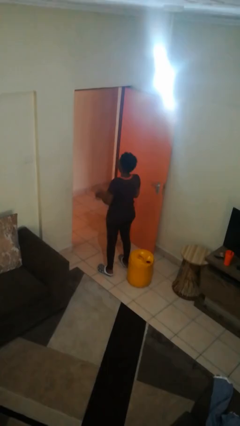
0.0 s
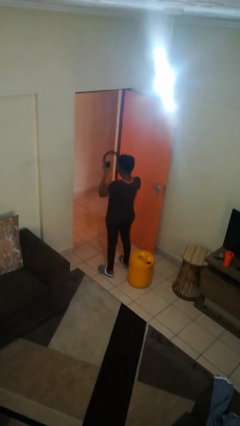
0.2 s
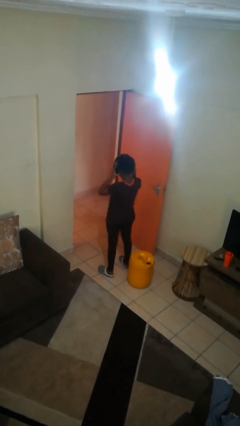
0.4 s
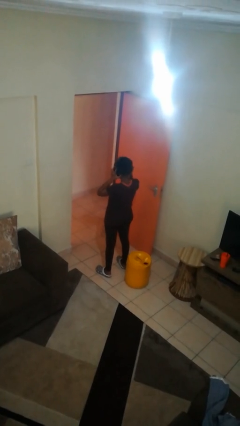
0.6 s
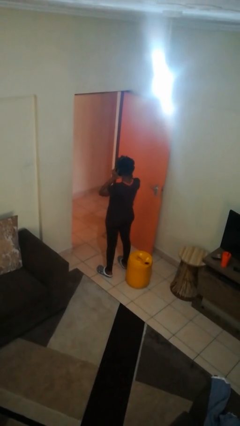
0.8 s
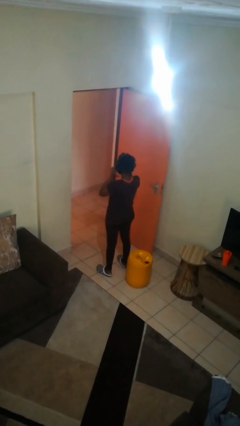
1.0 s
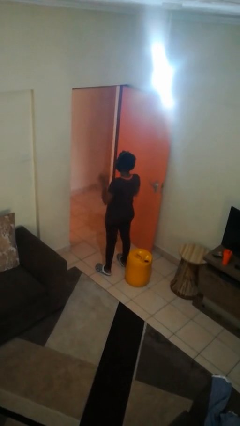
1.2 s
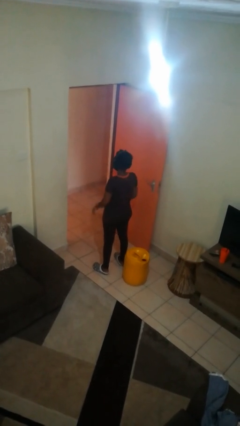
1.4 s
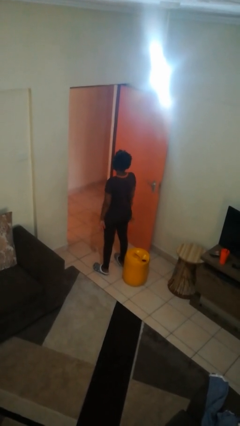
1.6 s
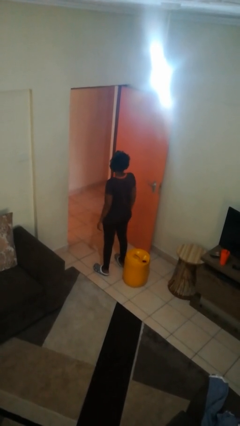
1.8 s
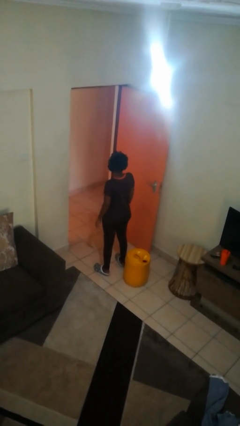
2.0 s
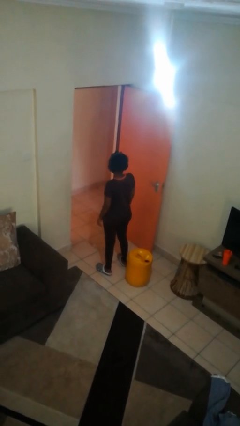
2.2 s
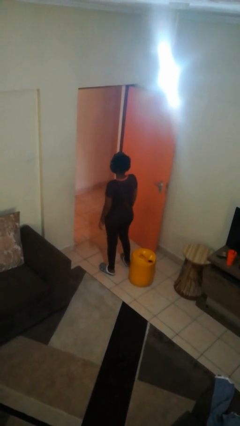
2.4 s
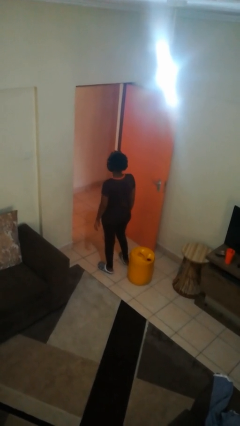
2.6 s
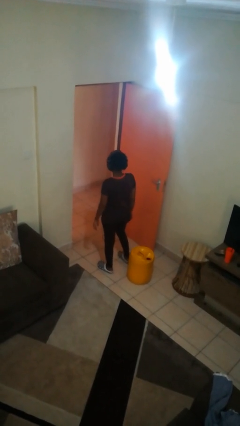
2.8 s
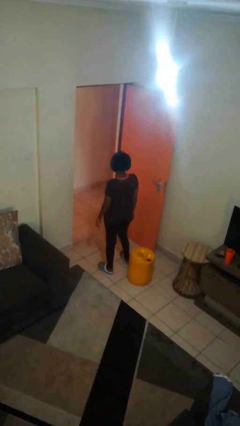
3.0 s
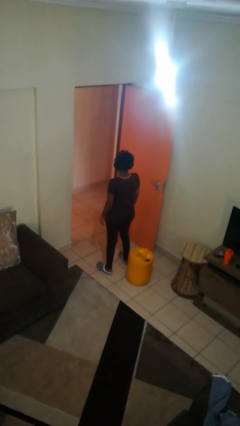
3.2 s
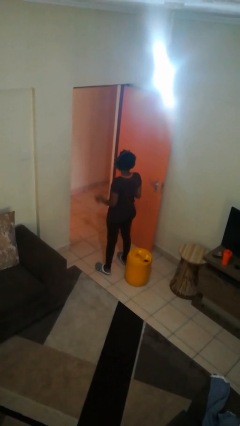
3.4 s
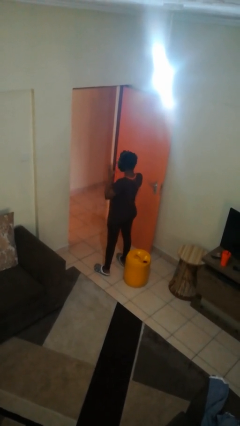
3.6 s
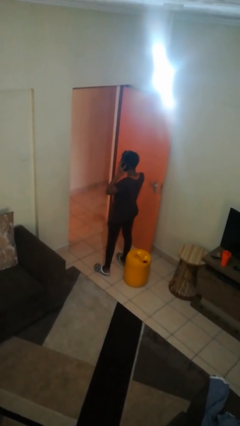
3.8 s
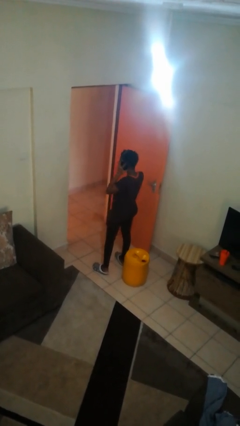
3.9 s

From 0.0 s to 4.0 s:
person puts on headphones

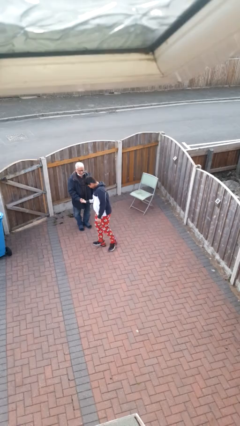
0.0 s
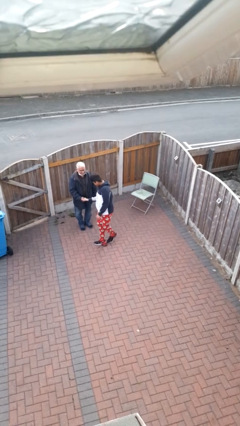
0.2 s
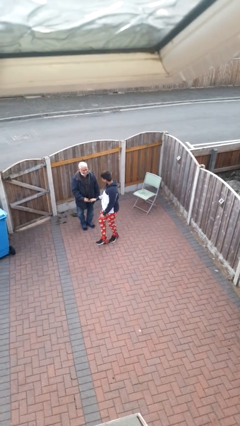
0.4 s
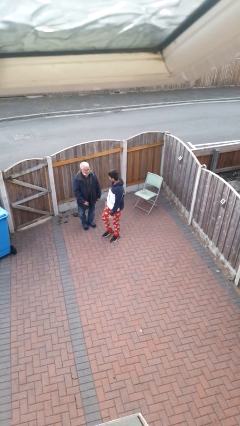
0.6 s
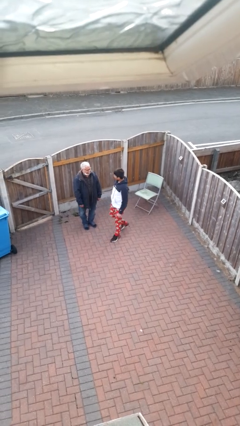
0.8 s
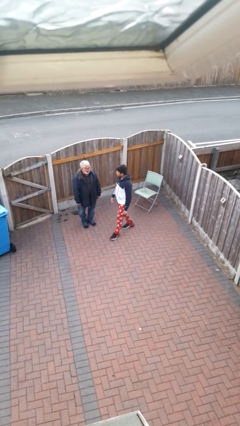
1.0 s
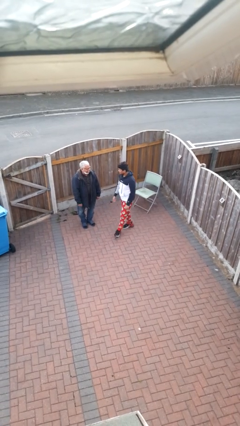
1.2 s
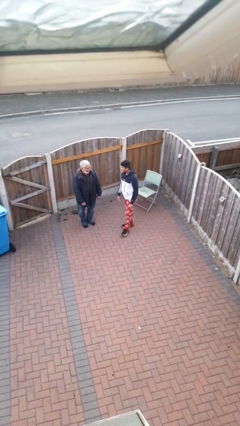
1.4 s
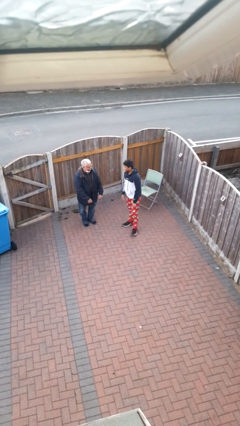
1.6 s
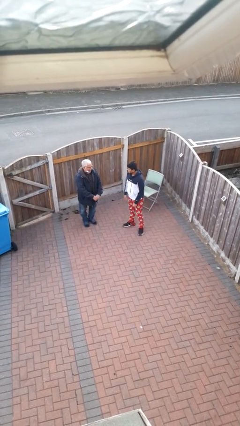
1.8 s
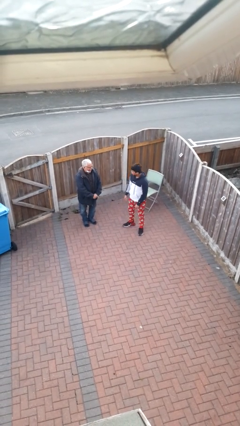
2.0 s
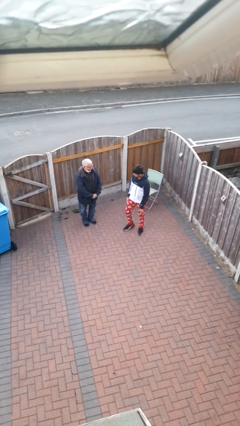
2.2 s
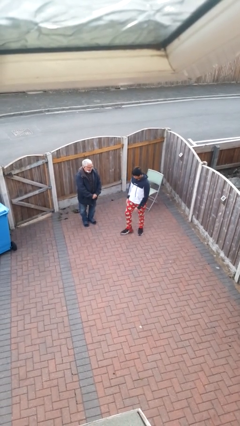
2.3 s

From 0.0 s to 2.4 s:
person highfives hand

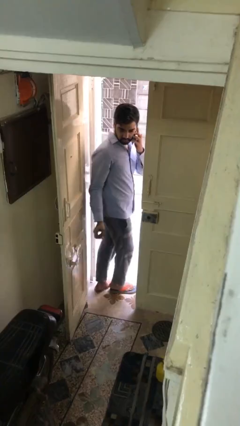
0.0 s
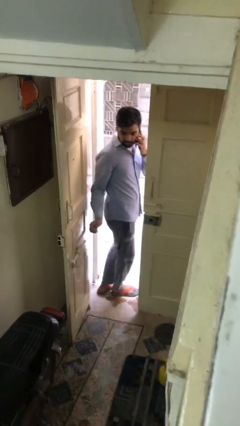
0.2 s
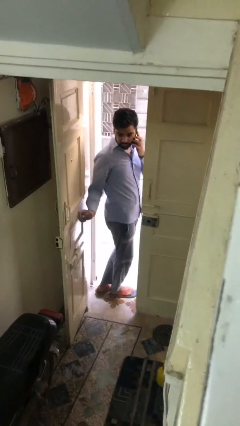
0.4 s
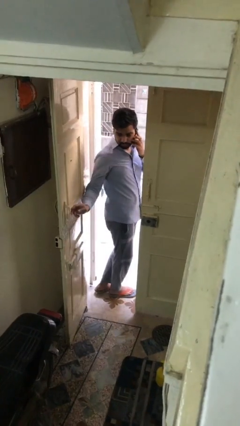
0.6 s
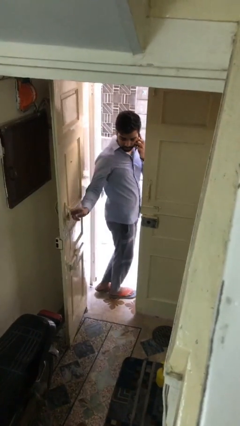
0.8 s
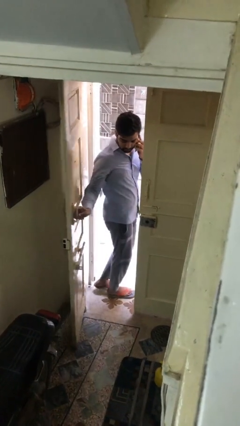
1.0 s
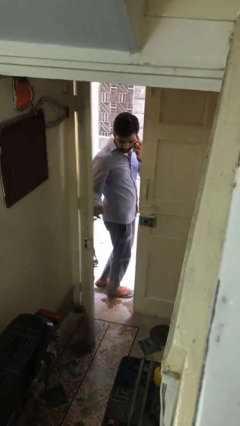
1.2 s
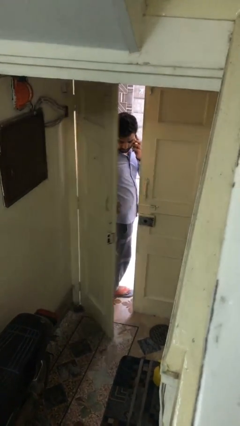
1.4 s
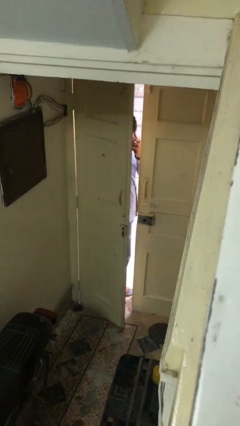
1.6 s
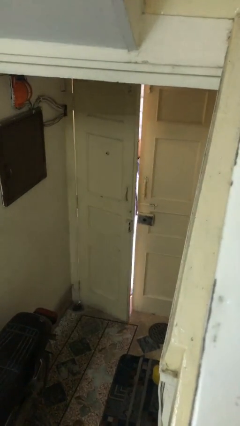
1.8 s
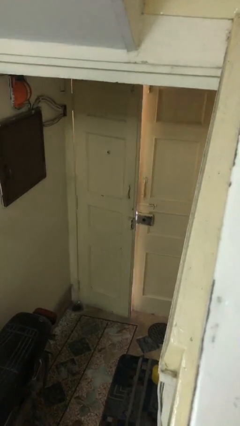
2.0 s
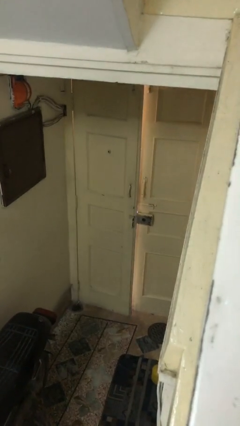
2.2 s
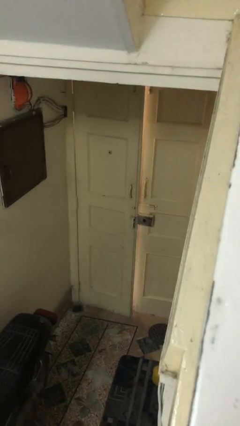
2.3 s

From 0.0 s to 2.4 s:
person closes facility door

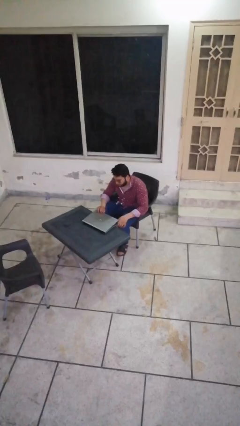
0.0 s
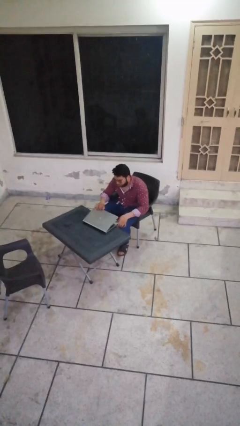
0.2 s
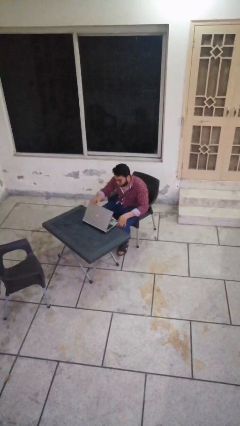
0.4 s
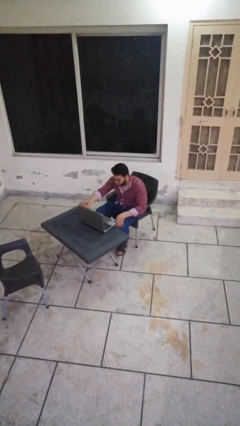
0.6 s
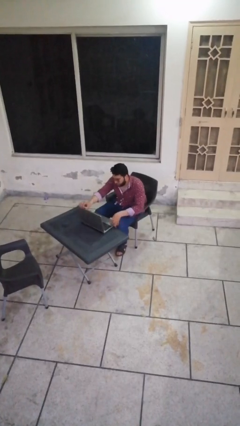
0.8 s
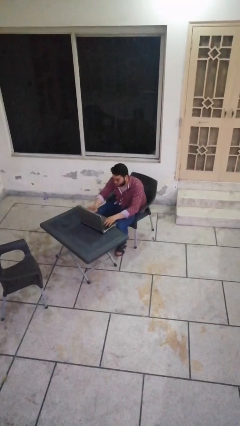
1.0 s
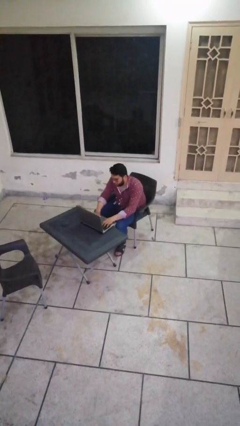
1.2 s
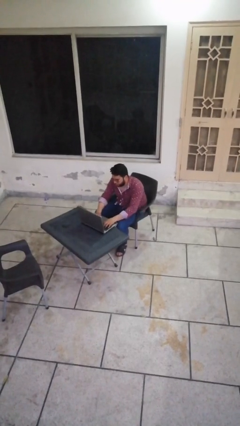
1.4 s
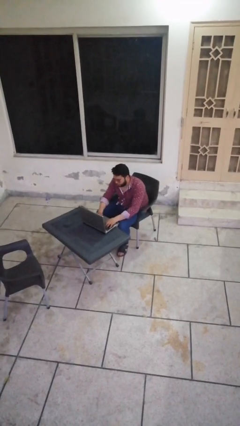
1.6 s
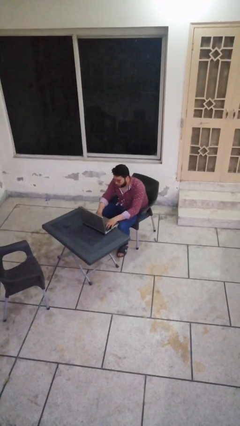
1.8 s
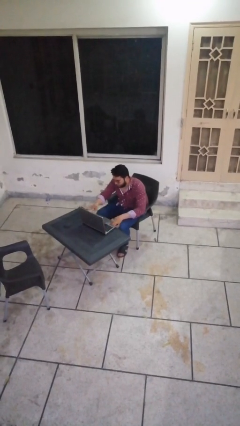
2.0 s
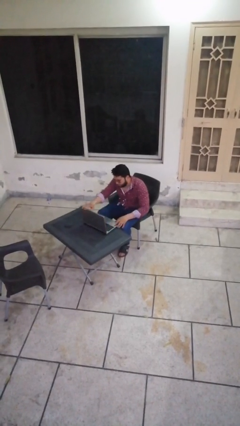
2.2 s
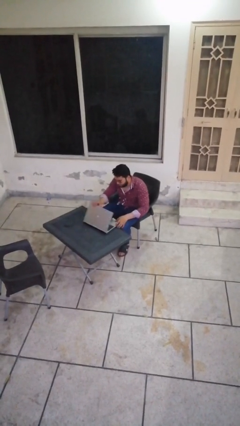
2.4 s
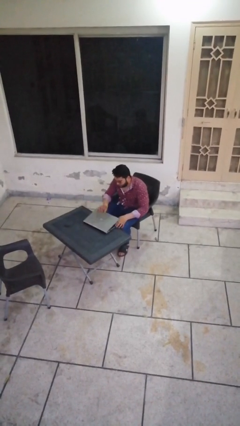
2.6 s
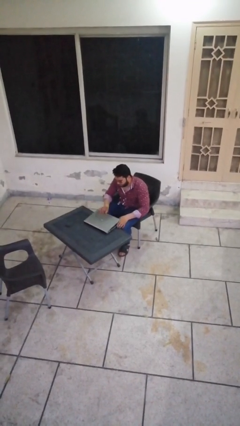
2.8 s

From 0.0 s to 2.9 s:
person interacts with laptop

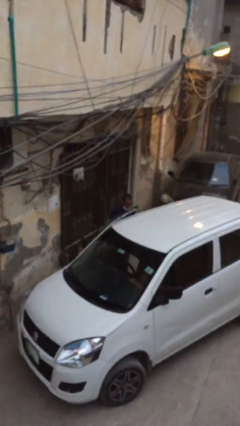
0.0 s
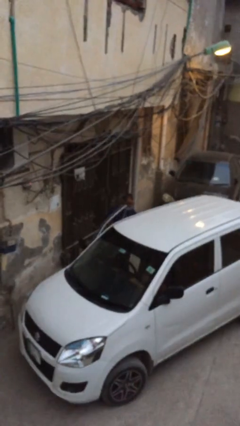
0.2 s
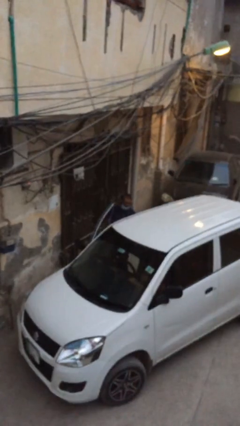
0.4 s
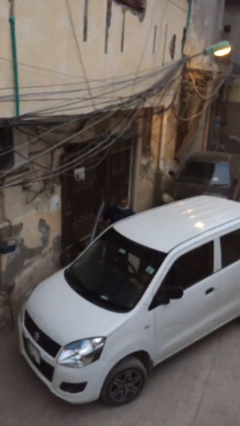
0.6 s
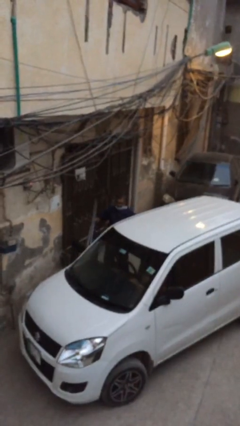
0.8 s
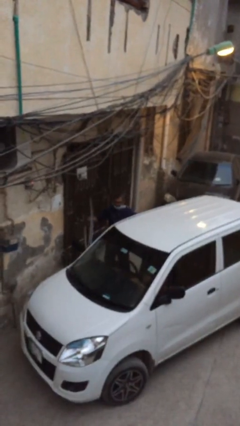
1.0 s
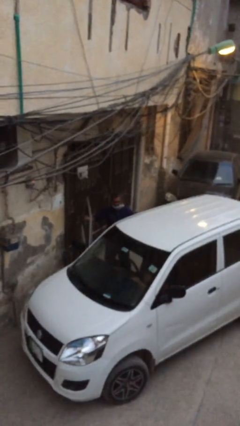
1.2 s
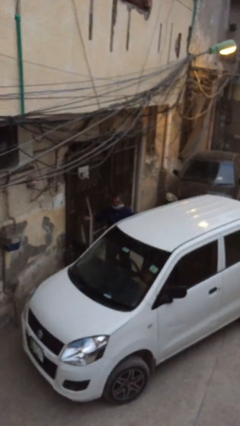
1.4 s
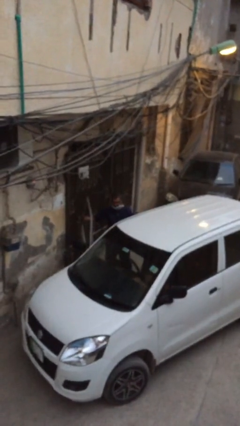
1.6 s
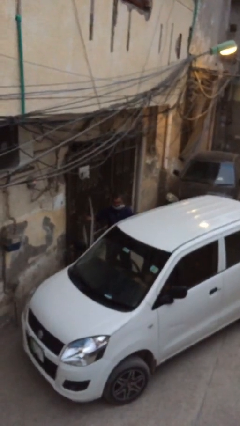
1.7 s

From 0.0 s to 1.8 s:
person opens car door

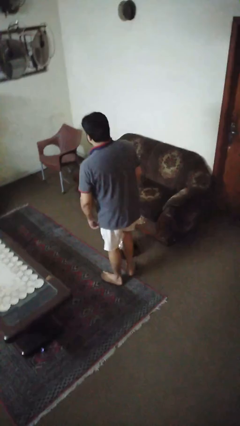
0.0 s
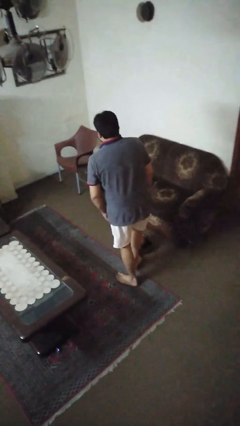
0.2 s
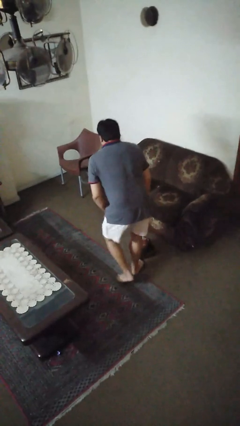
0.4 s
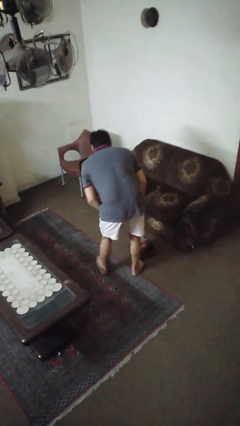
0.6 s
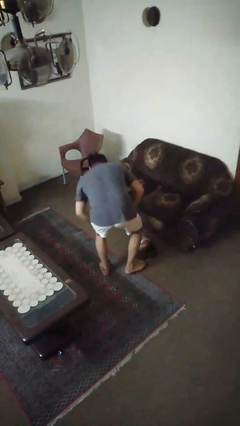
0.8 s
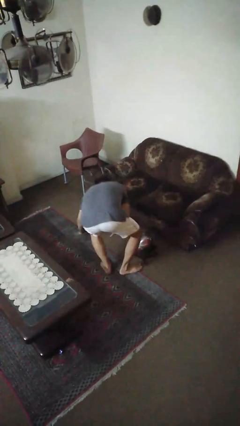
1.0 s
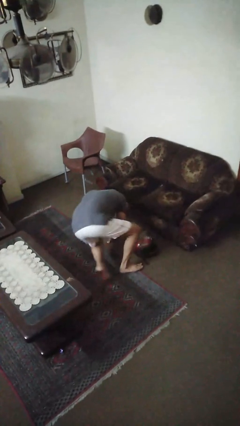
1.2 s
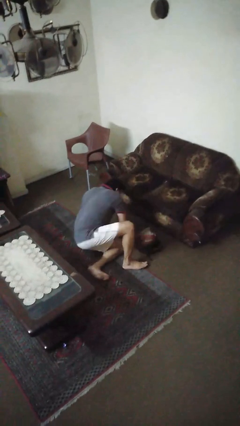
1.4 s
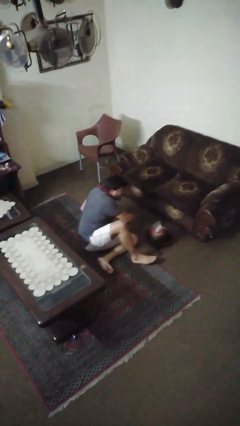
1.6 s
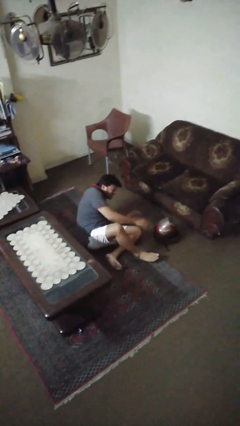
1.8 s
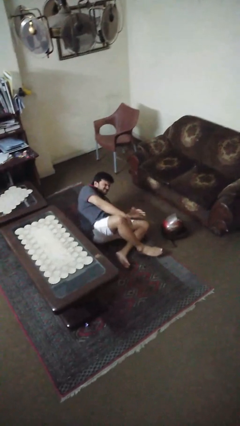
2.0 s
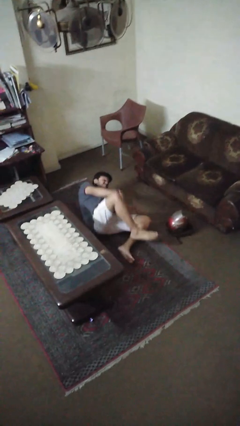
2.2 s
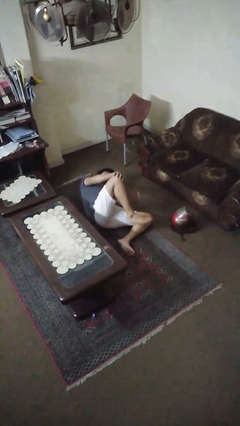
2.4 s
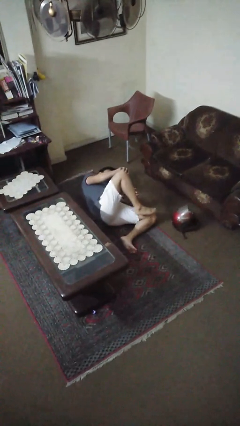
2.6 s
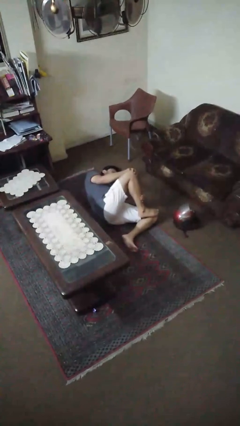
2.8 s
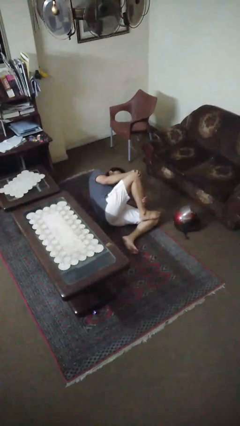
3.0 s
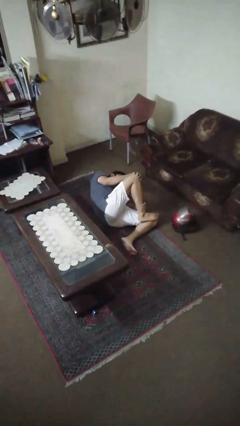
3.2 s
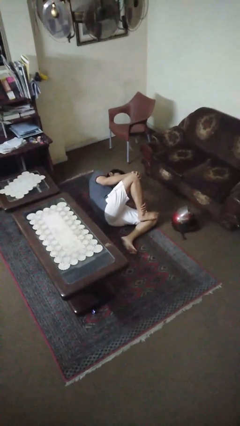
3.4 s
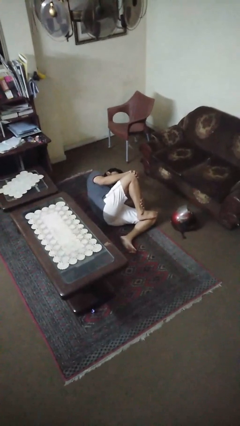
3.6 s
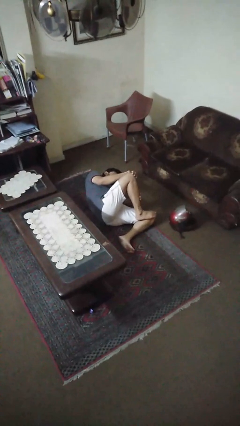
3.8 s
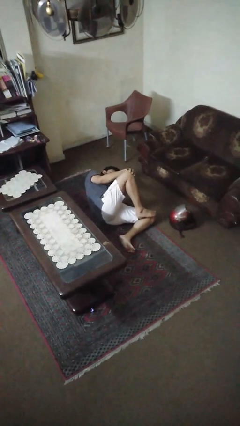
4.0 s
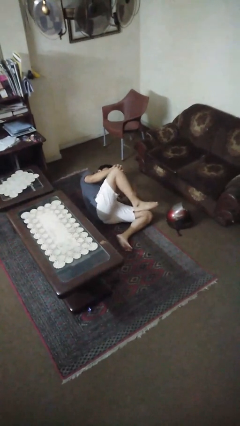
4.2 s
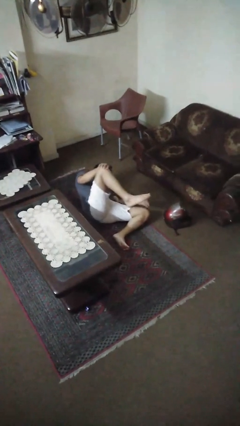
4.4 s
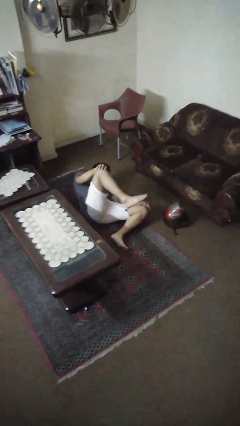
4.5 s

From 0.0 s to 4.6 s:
person lies down on floor
